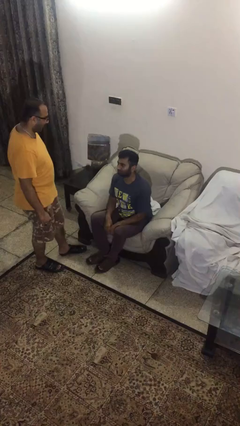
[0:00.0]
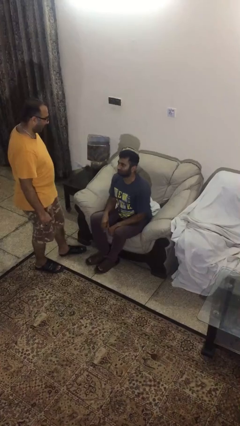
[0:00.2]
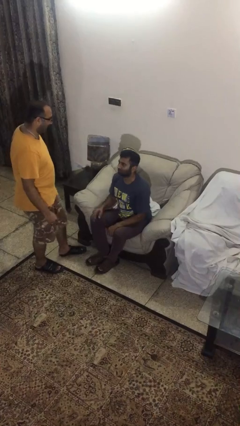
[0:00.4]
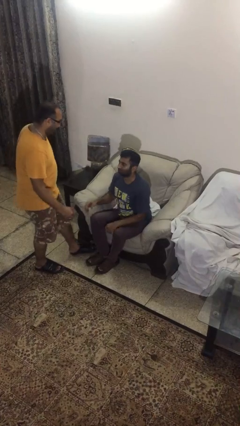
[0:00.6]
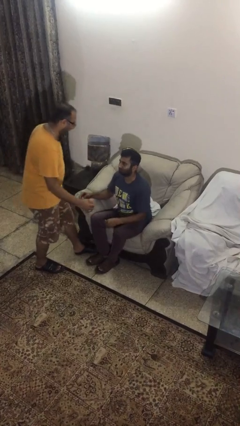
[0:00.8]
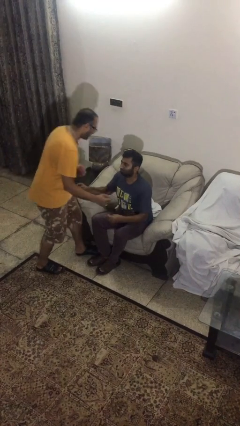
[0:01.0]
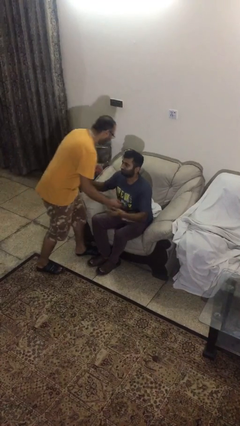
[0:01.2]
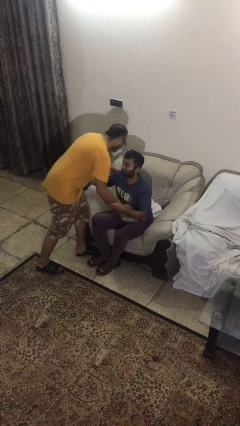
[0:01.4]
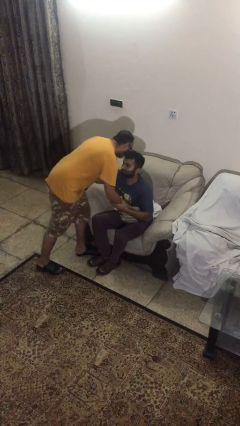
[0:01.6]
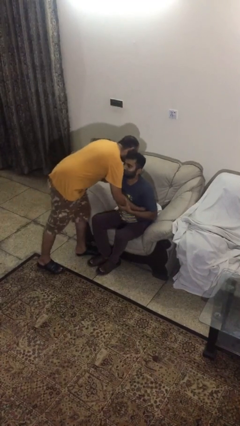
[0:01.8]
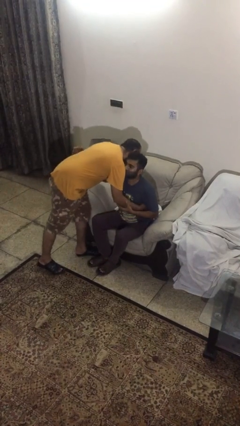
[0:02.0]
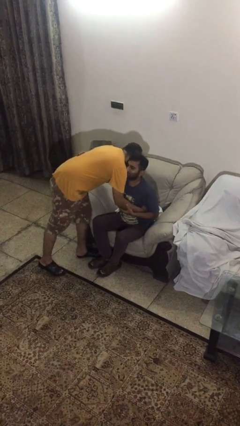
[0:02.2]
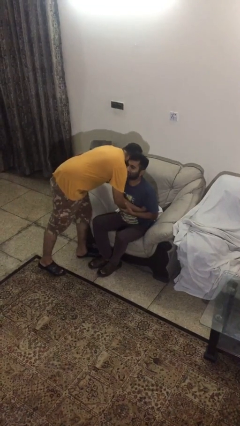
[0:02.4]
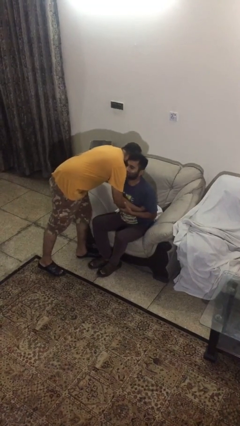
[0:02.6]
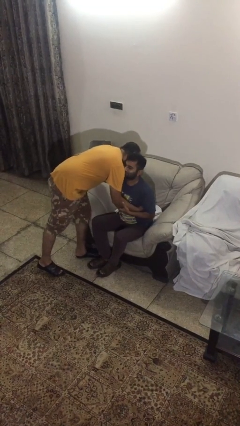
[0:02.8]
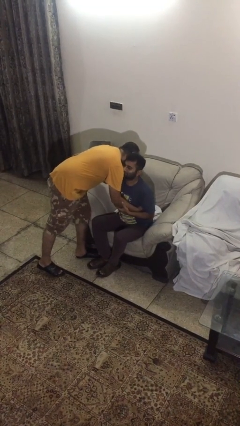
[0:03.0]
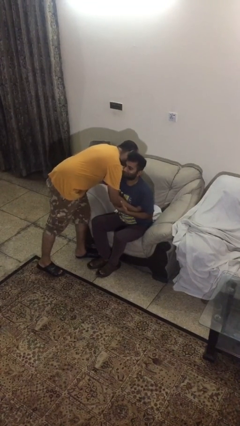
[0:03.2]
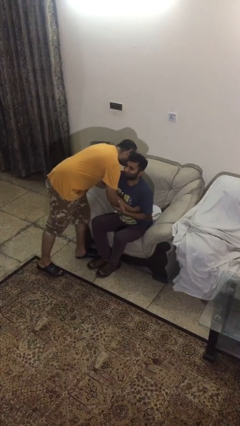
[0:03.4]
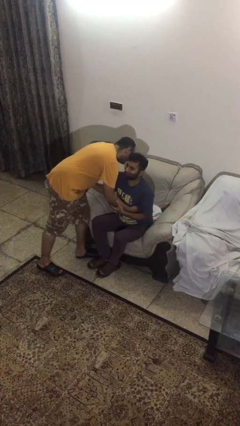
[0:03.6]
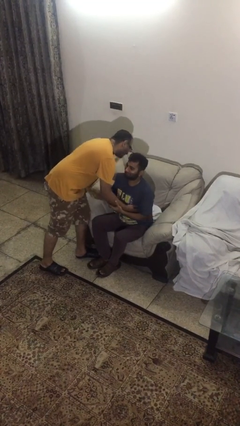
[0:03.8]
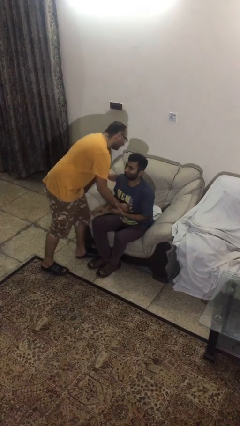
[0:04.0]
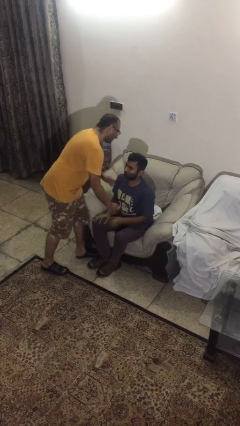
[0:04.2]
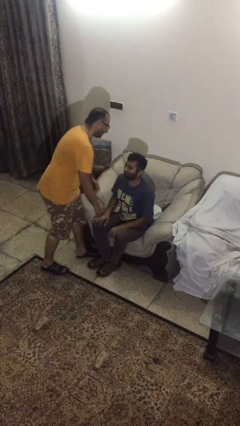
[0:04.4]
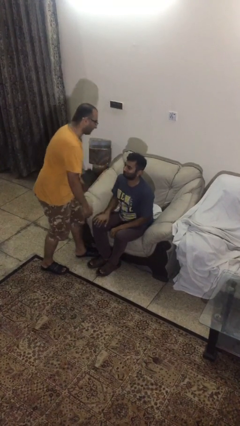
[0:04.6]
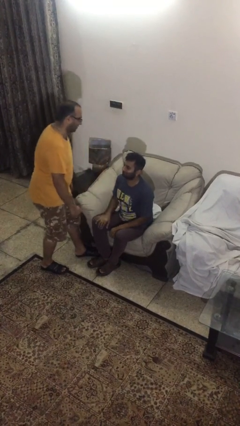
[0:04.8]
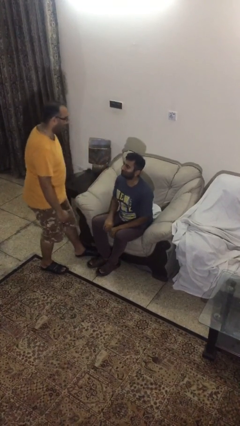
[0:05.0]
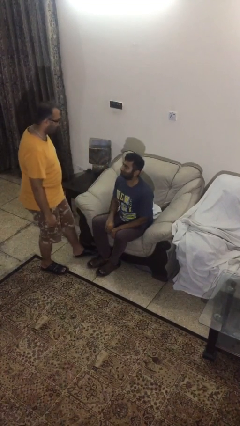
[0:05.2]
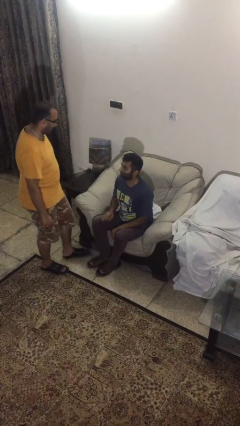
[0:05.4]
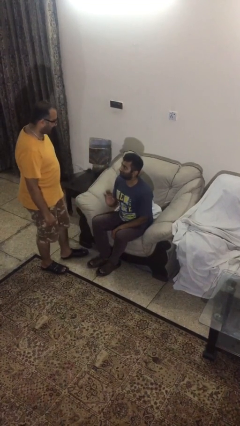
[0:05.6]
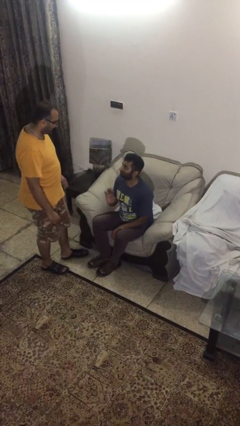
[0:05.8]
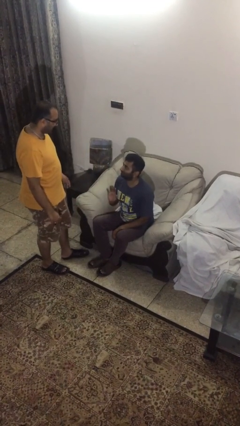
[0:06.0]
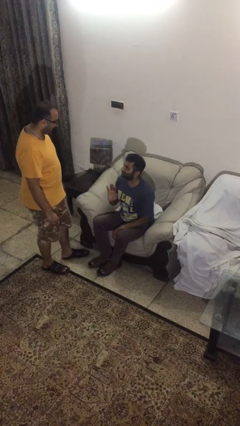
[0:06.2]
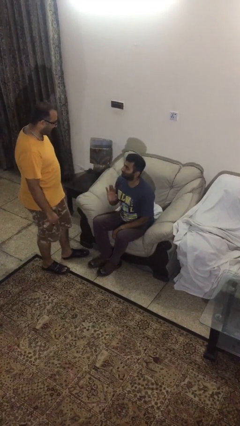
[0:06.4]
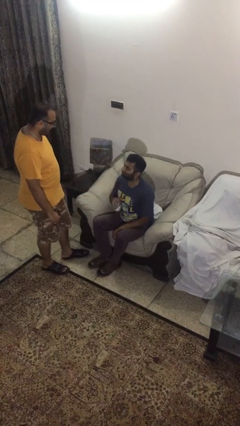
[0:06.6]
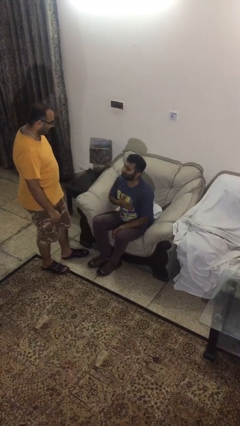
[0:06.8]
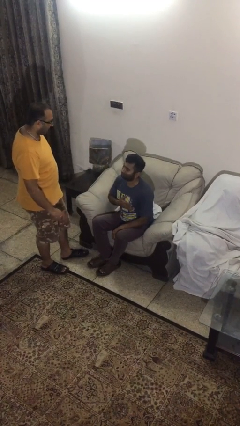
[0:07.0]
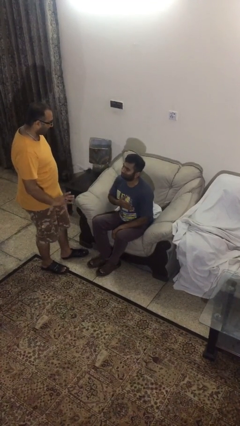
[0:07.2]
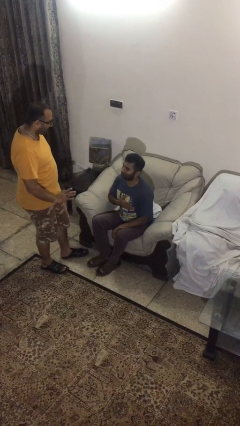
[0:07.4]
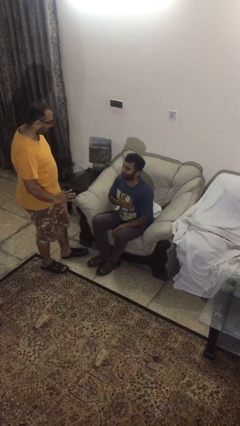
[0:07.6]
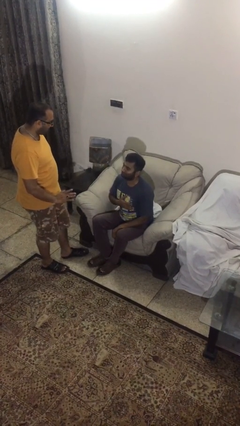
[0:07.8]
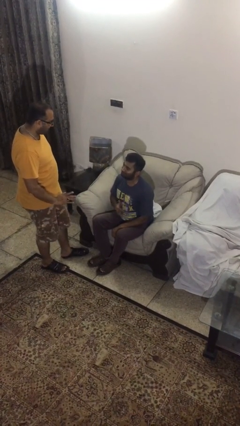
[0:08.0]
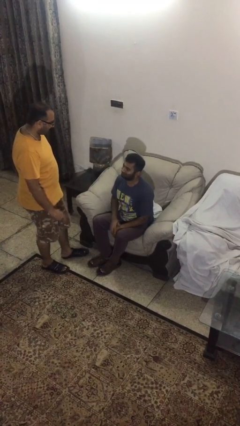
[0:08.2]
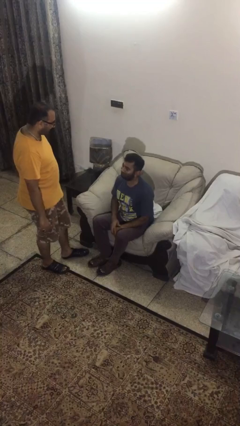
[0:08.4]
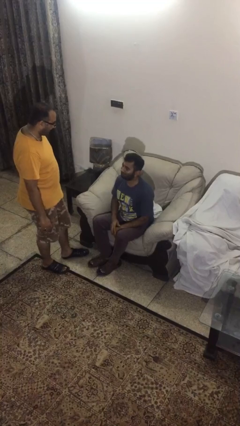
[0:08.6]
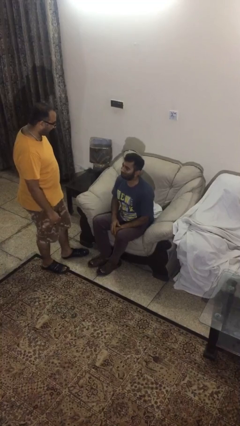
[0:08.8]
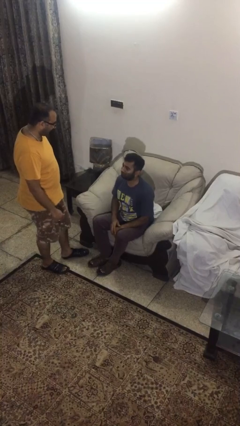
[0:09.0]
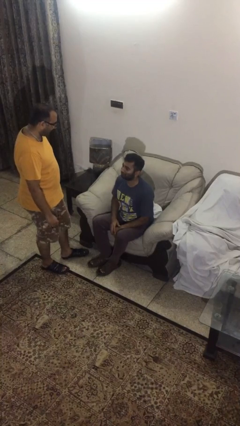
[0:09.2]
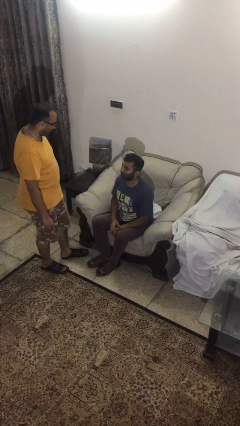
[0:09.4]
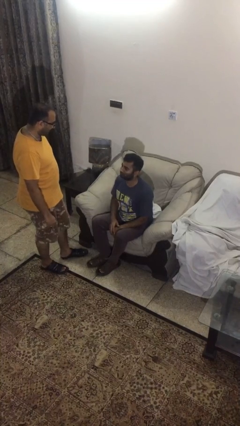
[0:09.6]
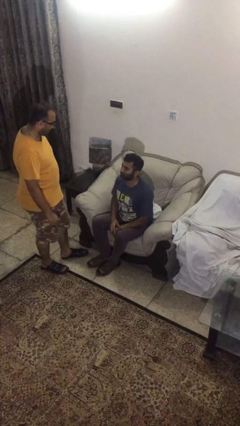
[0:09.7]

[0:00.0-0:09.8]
person embraces person

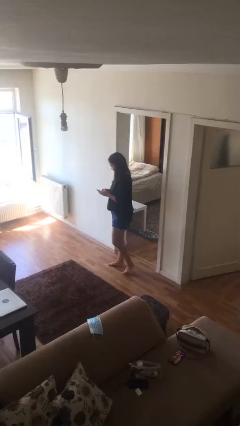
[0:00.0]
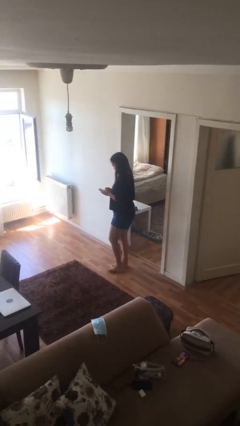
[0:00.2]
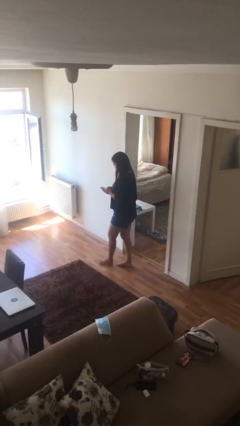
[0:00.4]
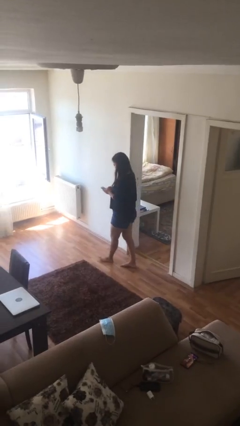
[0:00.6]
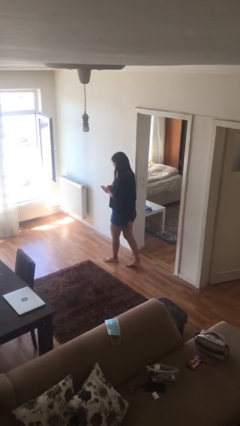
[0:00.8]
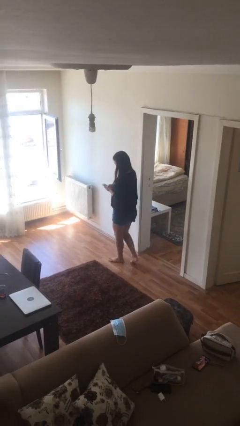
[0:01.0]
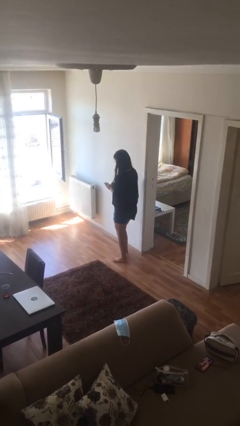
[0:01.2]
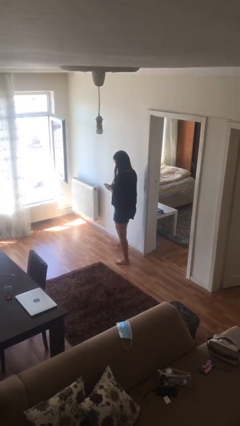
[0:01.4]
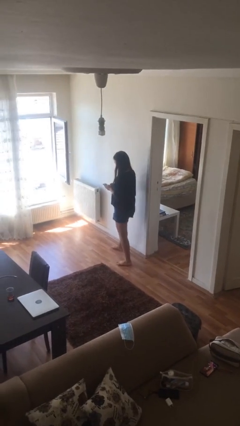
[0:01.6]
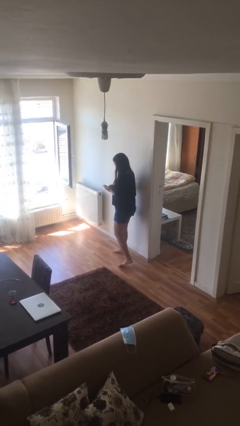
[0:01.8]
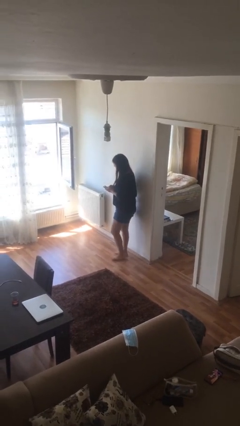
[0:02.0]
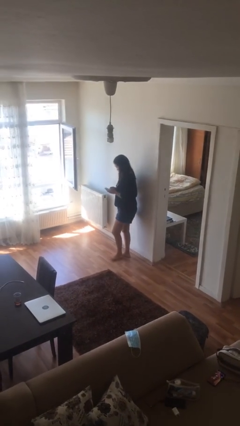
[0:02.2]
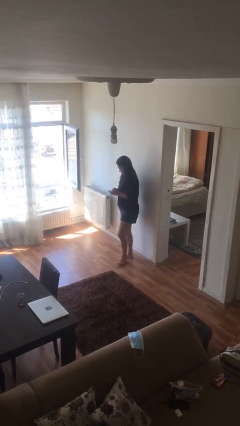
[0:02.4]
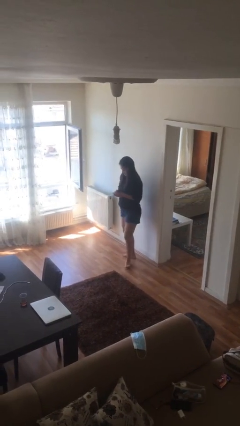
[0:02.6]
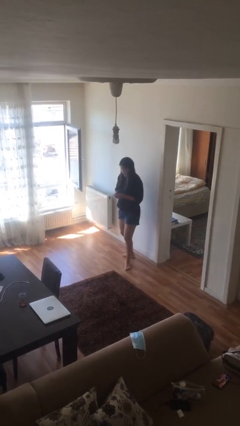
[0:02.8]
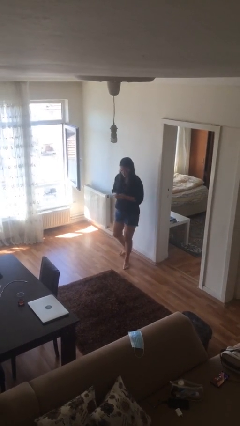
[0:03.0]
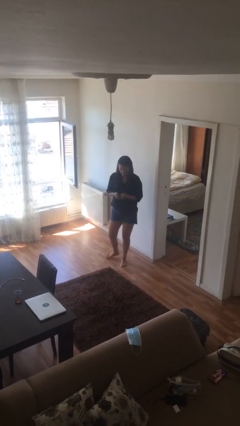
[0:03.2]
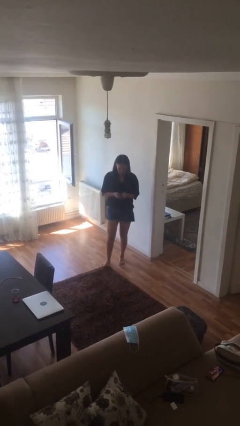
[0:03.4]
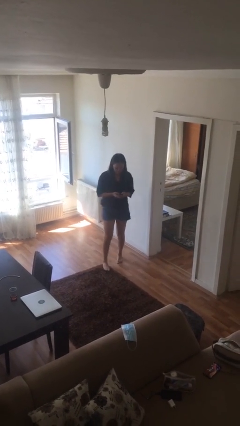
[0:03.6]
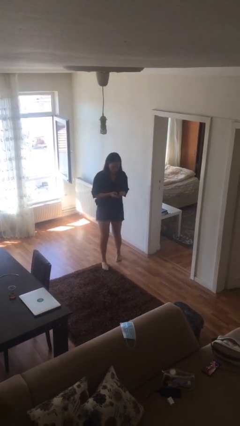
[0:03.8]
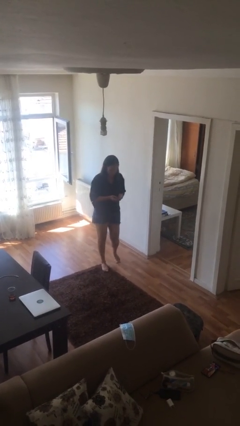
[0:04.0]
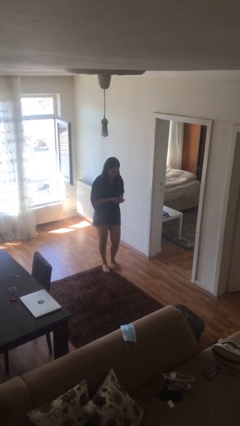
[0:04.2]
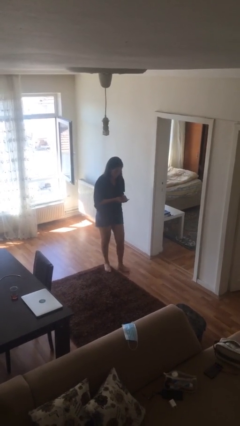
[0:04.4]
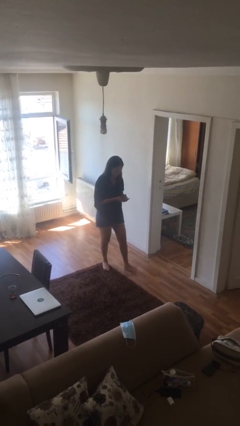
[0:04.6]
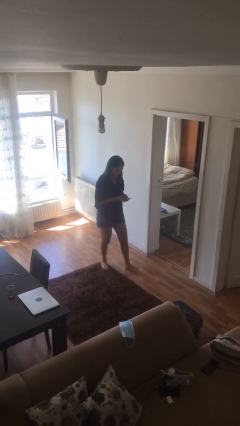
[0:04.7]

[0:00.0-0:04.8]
person texts on phone

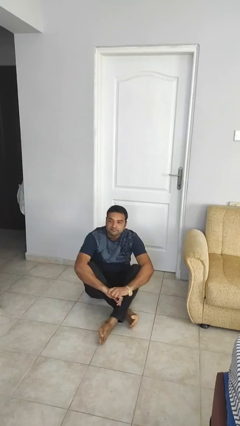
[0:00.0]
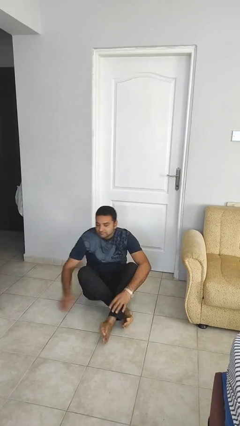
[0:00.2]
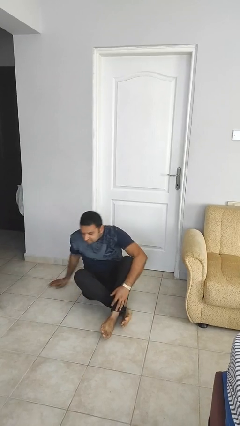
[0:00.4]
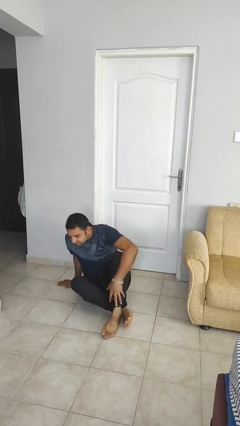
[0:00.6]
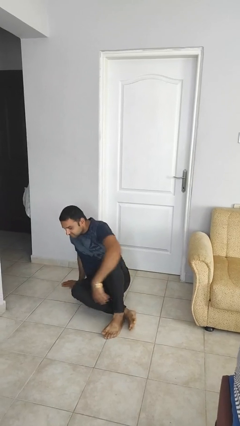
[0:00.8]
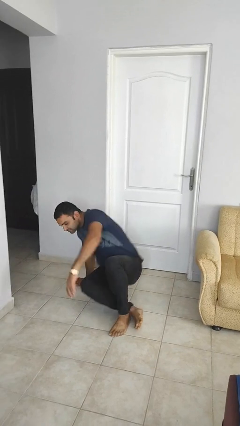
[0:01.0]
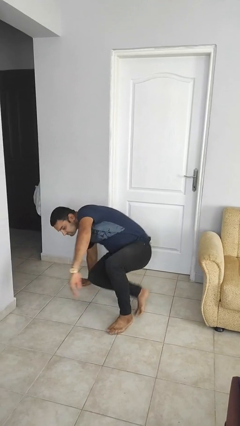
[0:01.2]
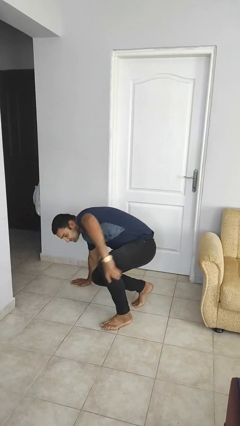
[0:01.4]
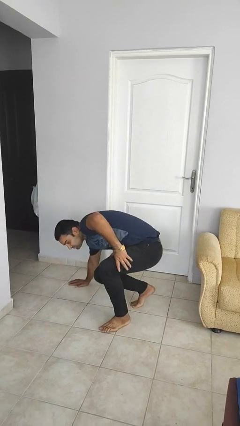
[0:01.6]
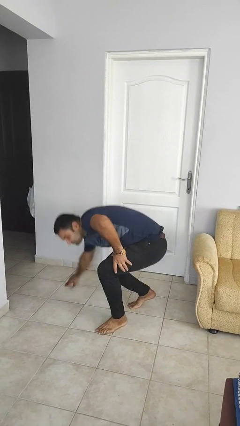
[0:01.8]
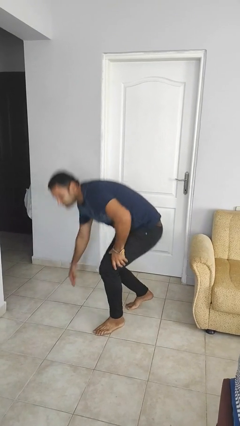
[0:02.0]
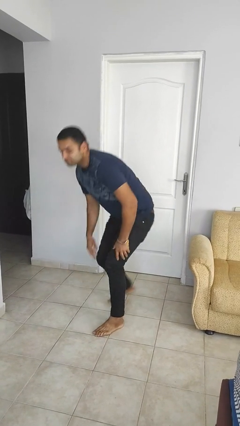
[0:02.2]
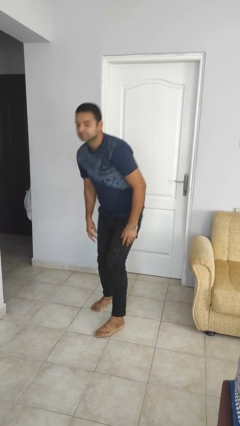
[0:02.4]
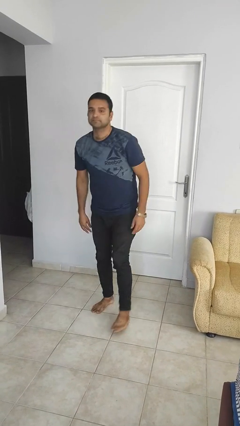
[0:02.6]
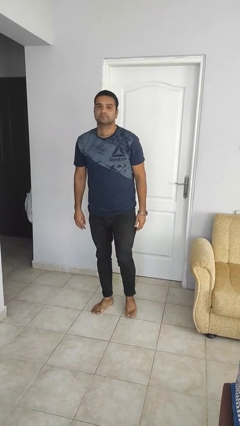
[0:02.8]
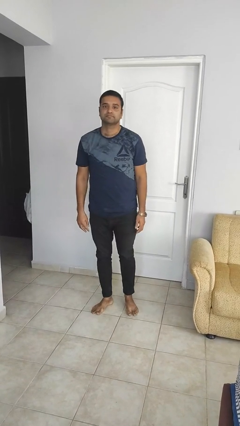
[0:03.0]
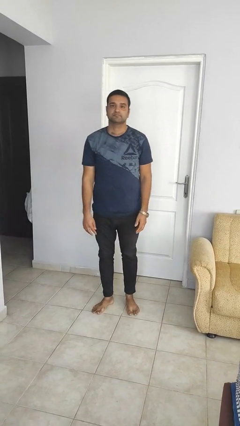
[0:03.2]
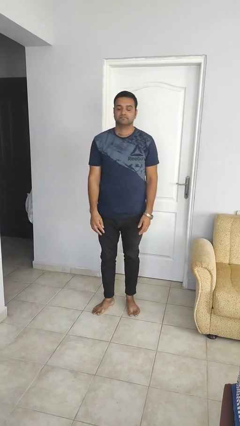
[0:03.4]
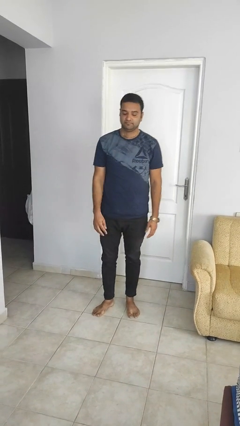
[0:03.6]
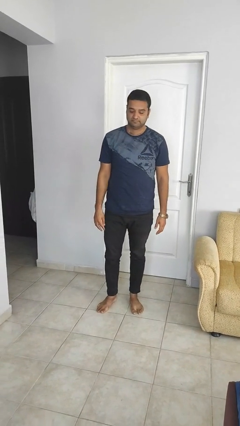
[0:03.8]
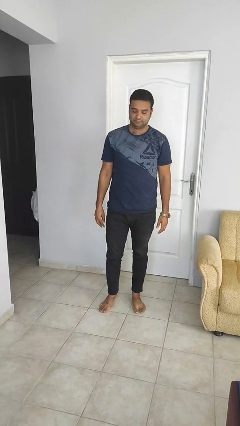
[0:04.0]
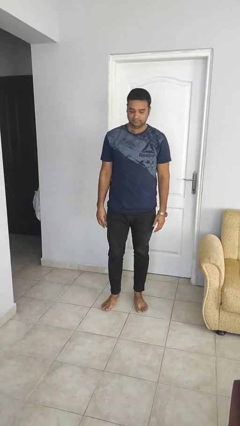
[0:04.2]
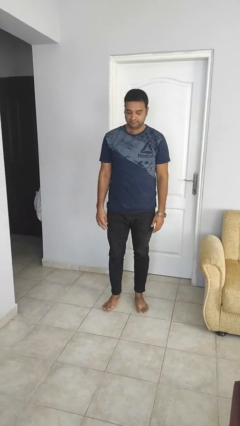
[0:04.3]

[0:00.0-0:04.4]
person stands up from floor
